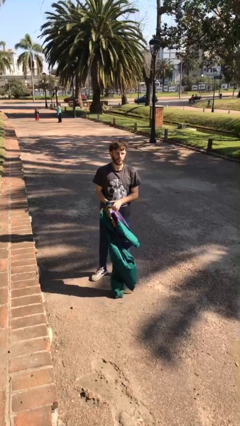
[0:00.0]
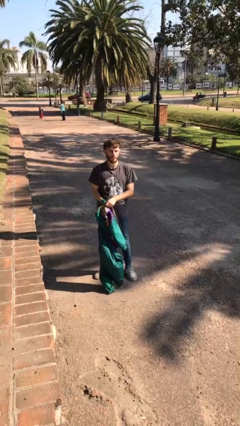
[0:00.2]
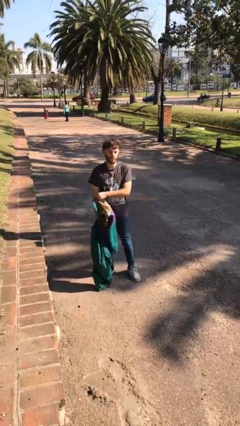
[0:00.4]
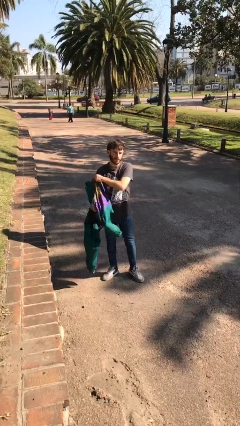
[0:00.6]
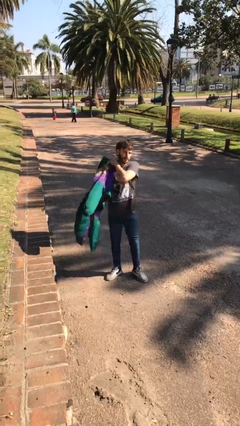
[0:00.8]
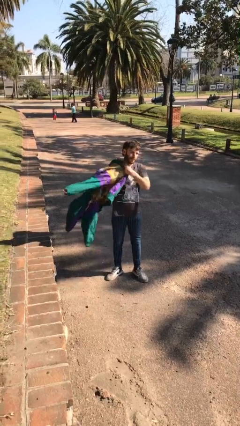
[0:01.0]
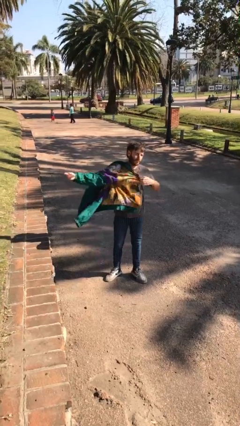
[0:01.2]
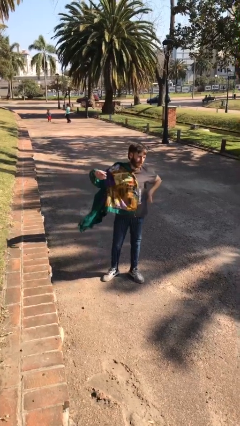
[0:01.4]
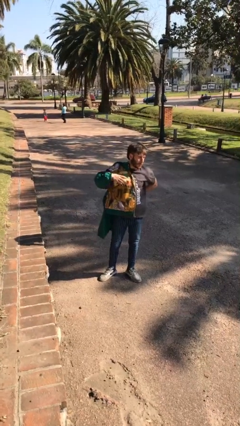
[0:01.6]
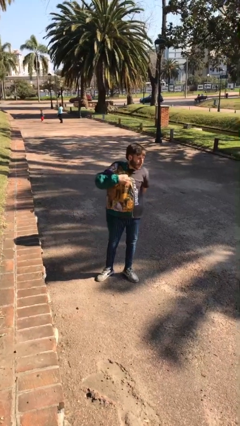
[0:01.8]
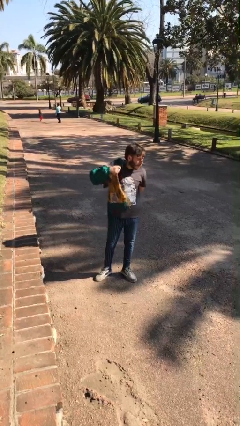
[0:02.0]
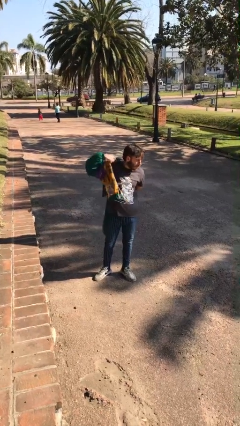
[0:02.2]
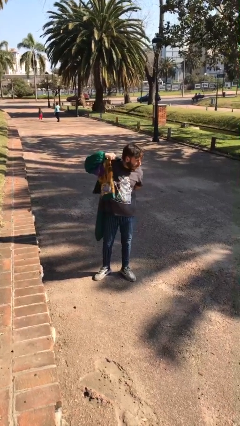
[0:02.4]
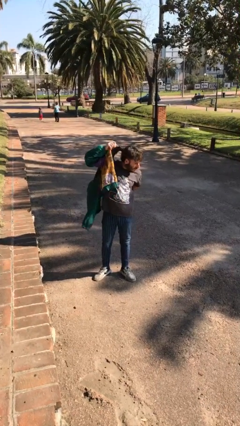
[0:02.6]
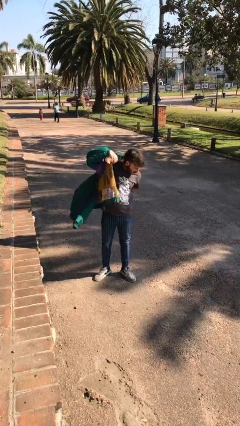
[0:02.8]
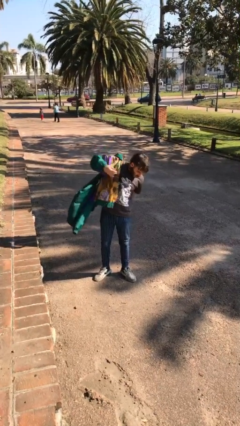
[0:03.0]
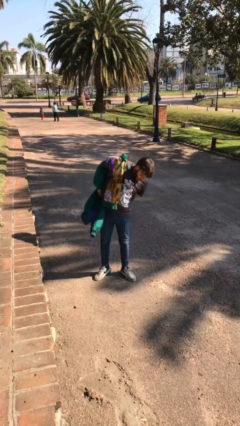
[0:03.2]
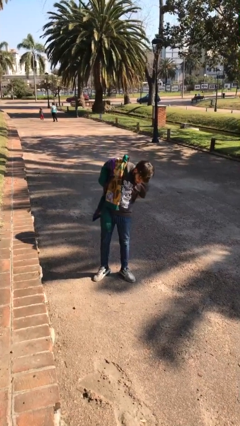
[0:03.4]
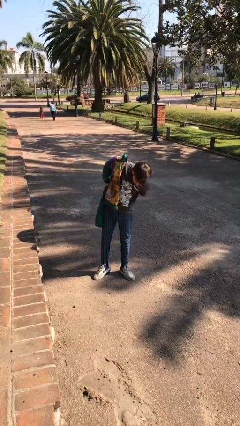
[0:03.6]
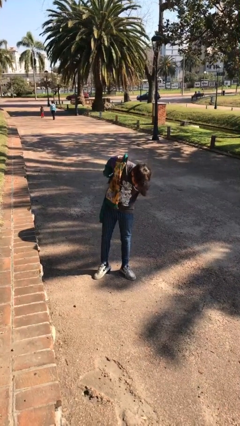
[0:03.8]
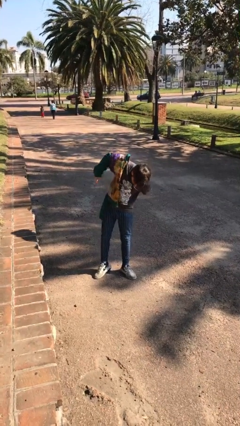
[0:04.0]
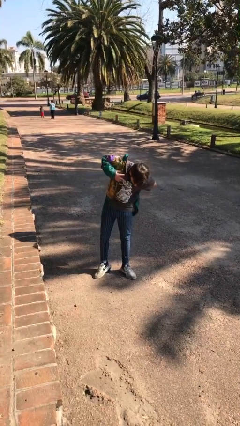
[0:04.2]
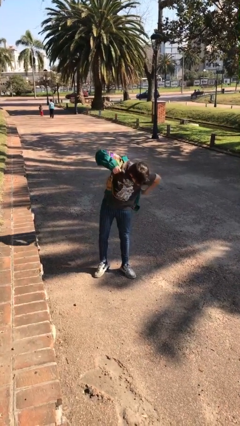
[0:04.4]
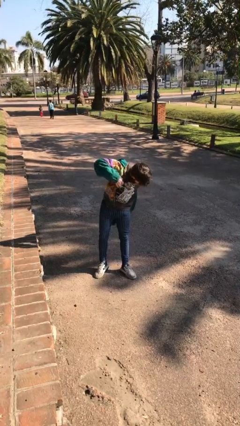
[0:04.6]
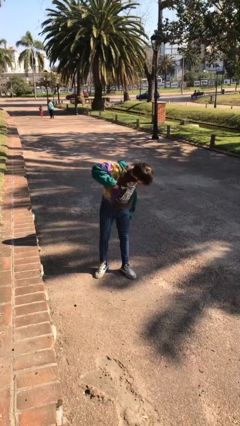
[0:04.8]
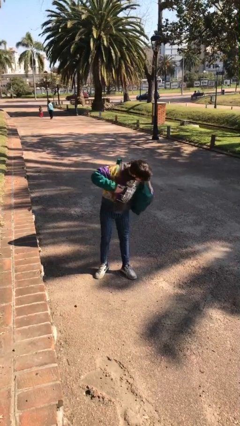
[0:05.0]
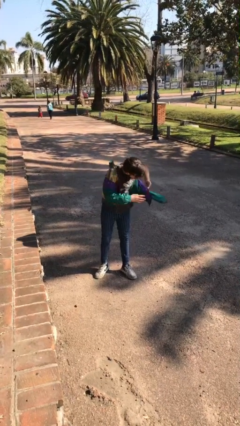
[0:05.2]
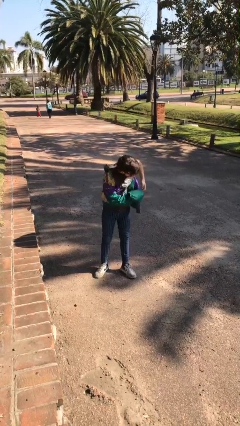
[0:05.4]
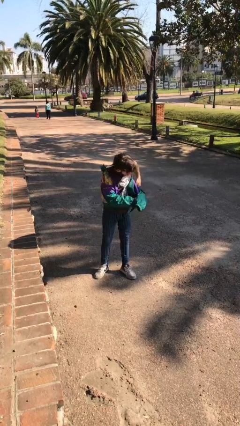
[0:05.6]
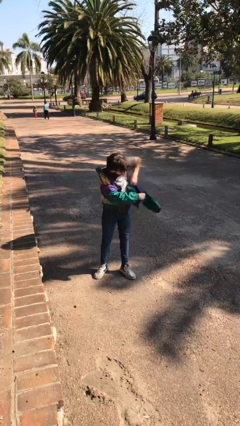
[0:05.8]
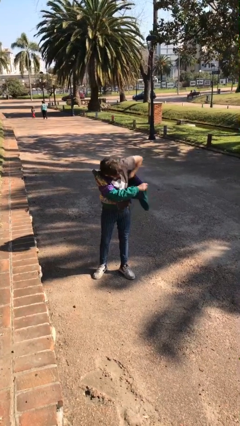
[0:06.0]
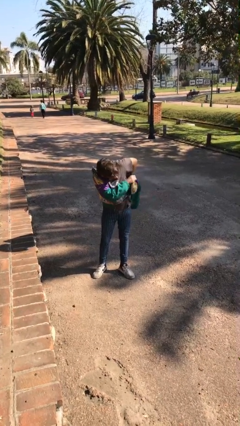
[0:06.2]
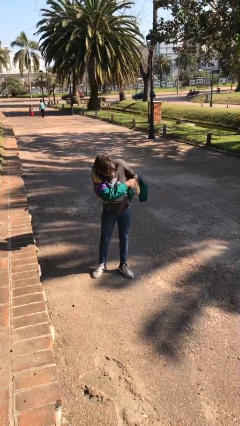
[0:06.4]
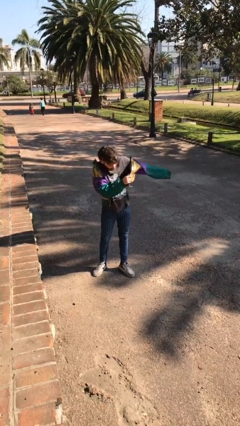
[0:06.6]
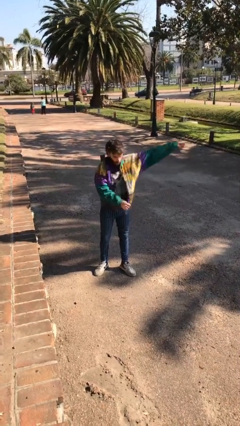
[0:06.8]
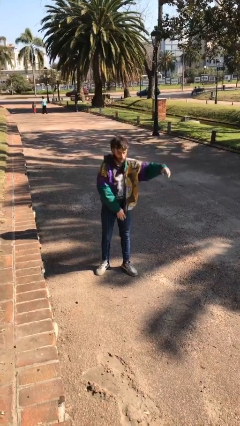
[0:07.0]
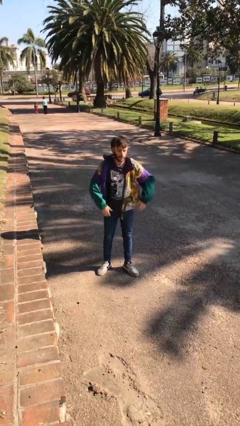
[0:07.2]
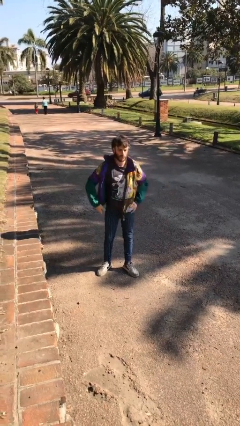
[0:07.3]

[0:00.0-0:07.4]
person puts on jacket

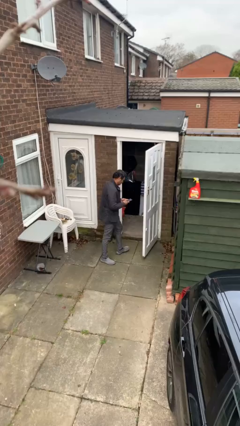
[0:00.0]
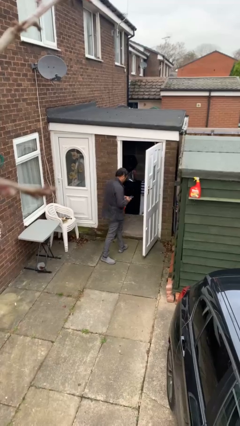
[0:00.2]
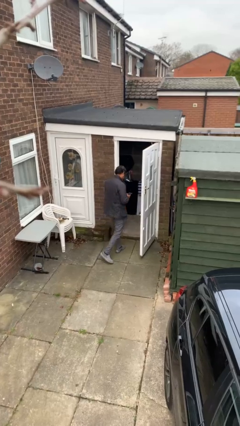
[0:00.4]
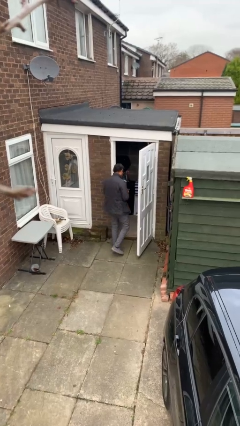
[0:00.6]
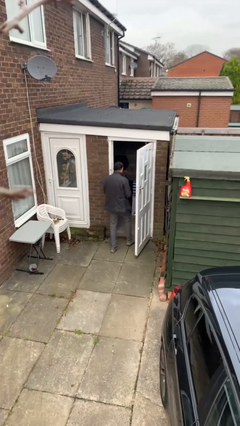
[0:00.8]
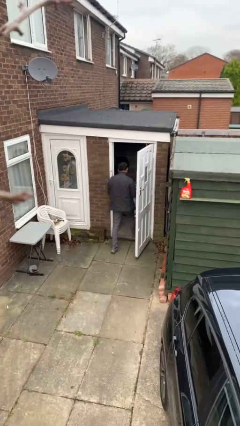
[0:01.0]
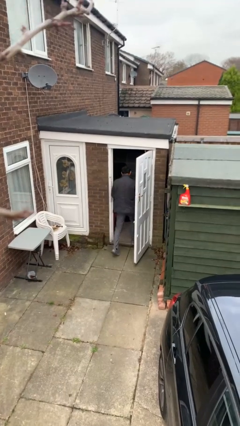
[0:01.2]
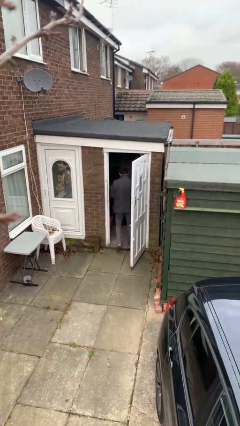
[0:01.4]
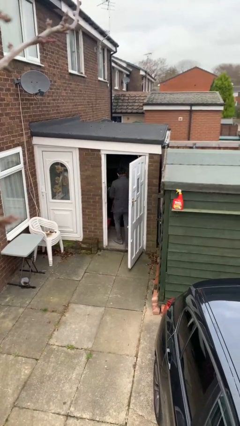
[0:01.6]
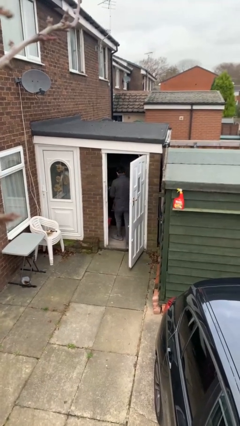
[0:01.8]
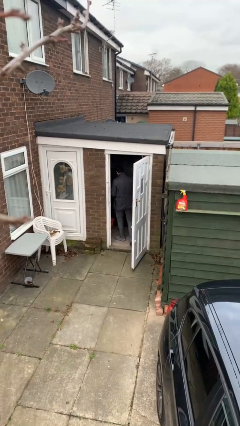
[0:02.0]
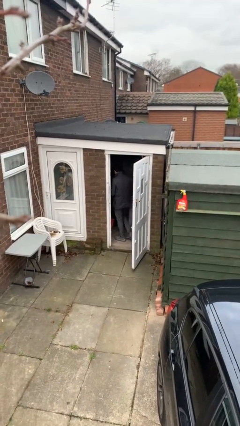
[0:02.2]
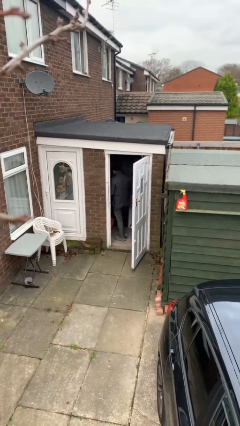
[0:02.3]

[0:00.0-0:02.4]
person exits scene through structure

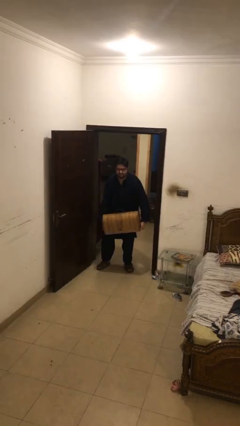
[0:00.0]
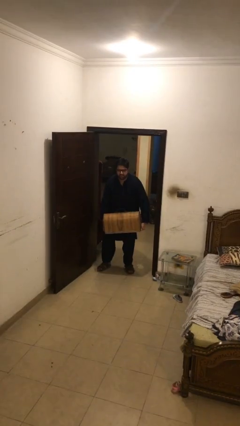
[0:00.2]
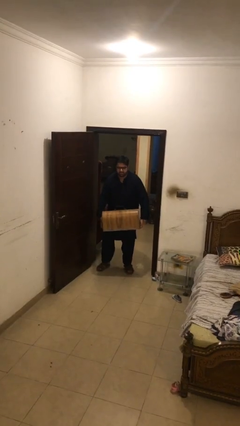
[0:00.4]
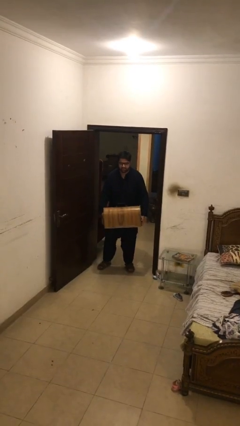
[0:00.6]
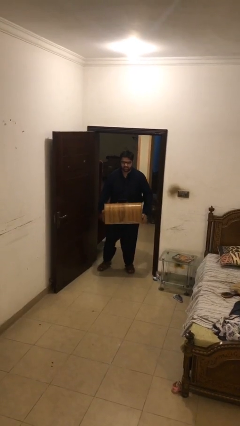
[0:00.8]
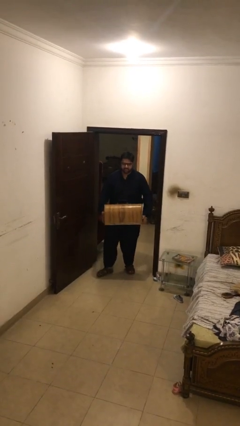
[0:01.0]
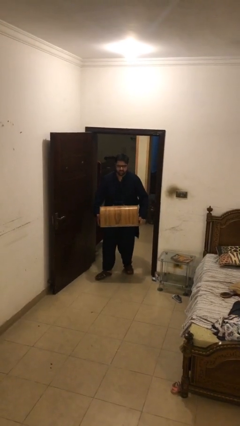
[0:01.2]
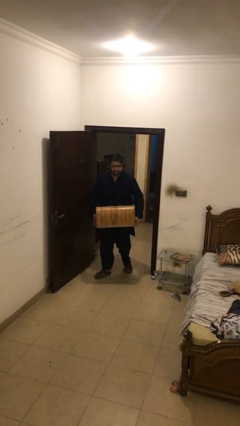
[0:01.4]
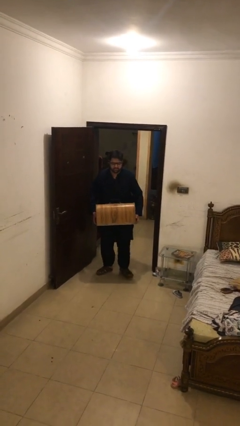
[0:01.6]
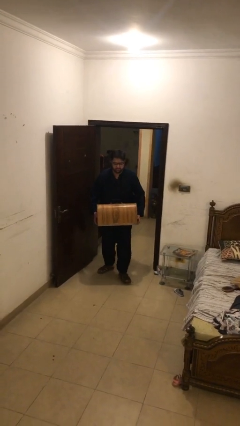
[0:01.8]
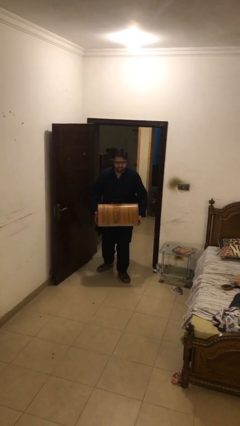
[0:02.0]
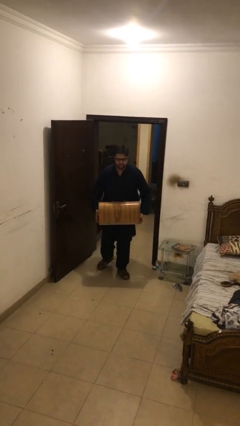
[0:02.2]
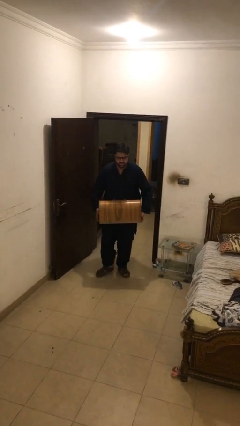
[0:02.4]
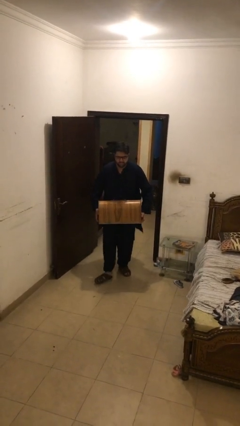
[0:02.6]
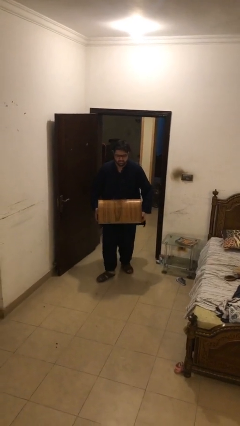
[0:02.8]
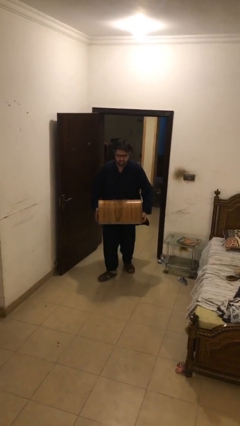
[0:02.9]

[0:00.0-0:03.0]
person carries heavy object

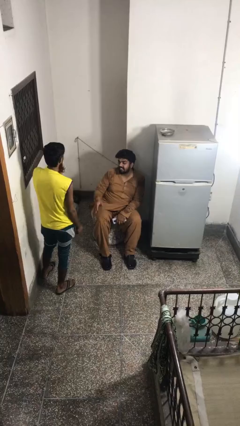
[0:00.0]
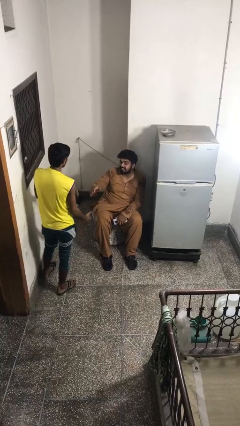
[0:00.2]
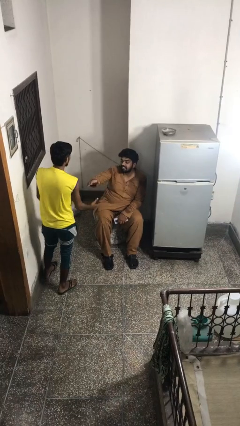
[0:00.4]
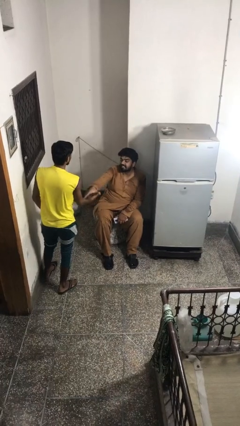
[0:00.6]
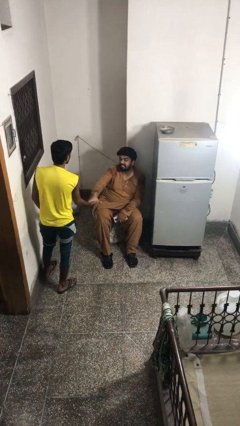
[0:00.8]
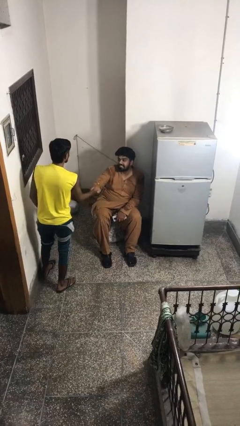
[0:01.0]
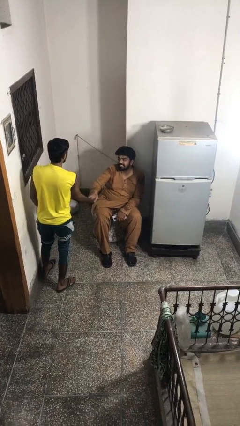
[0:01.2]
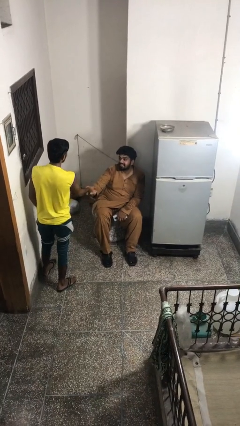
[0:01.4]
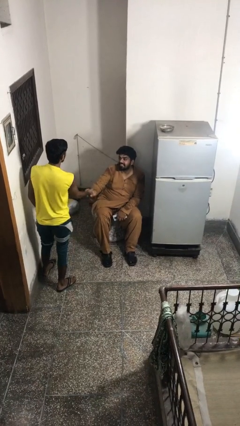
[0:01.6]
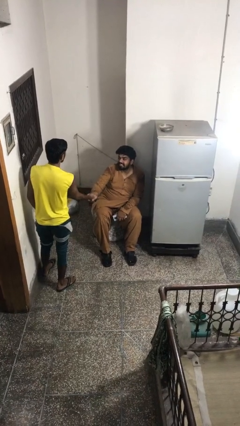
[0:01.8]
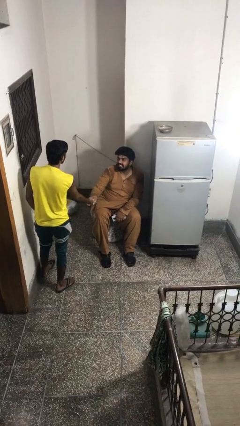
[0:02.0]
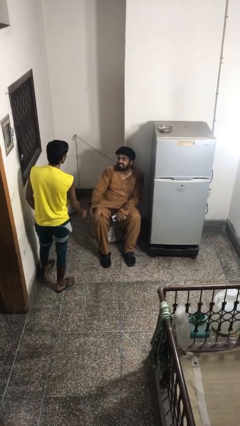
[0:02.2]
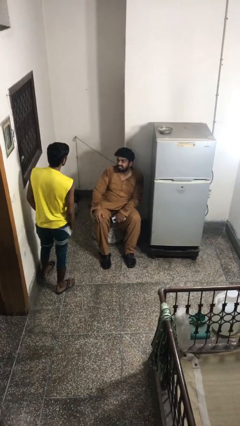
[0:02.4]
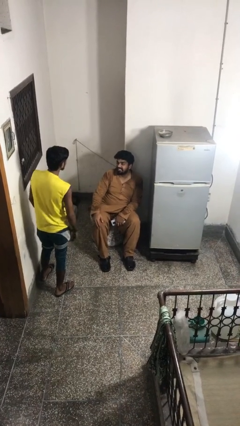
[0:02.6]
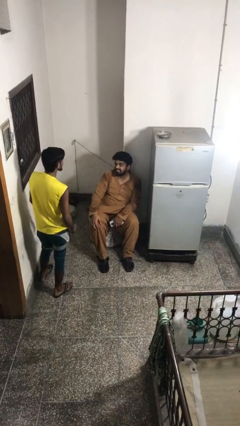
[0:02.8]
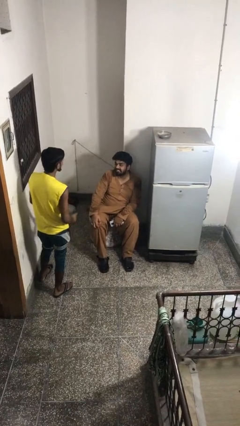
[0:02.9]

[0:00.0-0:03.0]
person shakes hand

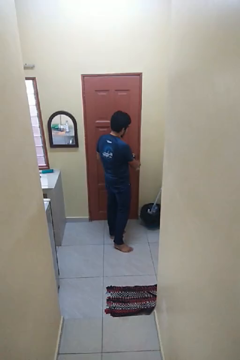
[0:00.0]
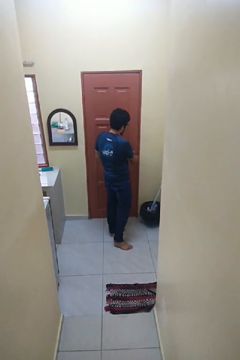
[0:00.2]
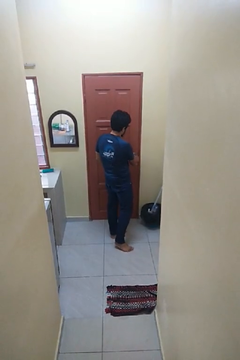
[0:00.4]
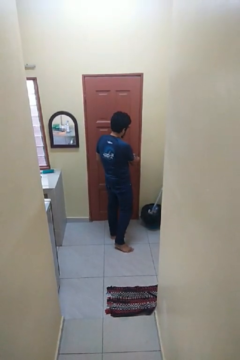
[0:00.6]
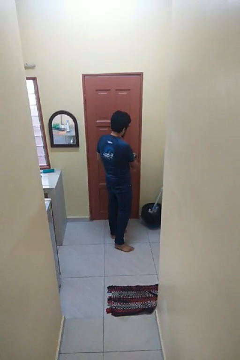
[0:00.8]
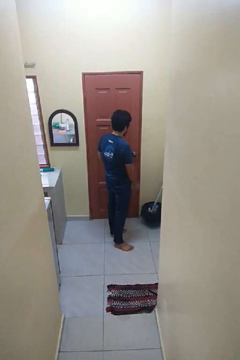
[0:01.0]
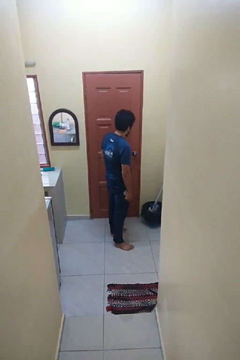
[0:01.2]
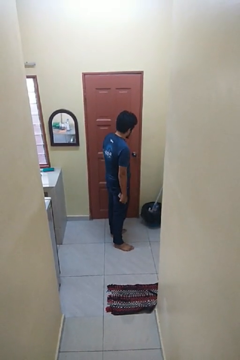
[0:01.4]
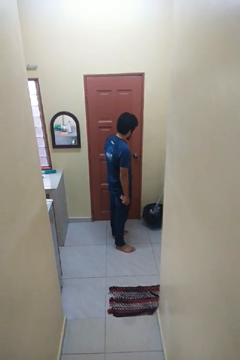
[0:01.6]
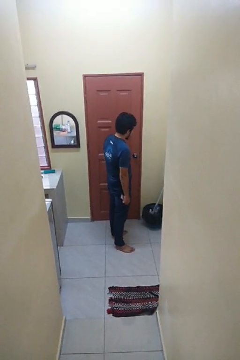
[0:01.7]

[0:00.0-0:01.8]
person unlocks door with keys

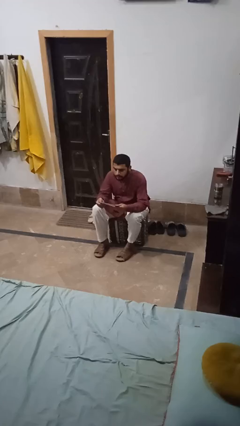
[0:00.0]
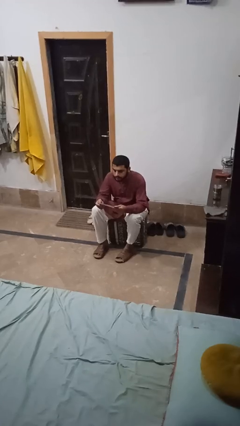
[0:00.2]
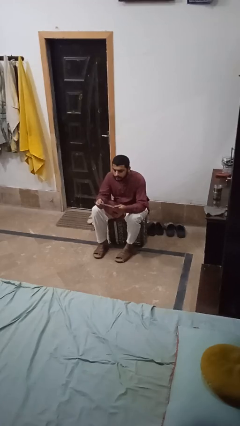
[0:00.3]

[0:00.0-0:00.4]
person reads magazine
